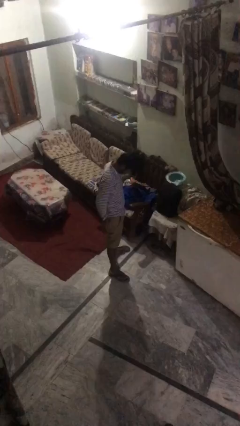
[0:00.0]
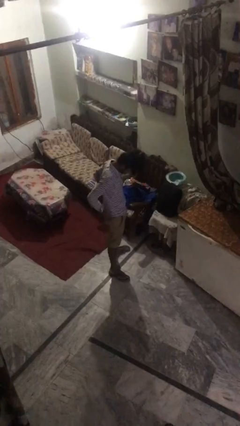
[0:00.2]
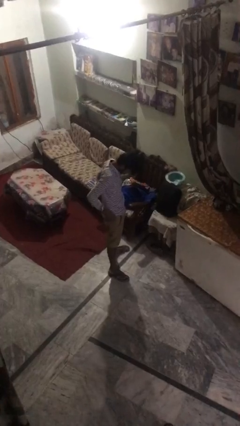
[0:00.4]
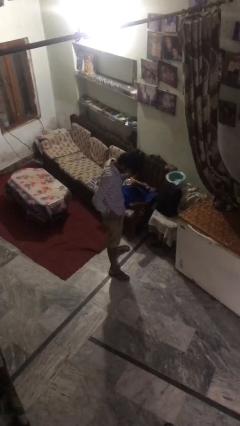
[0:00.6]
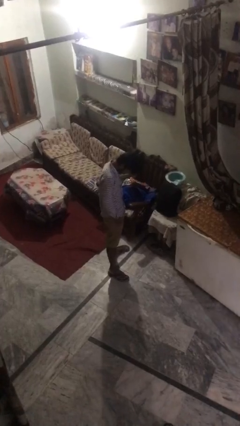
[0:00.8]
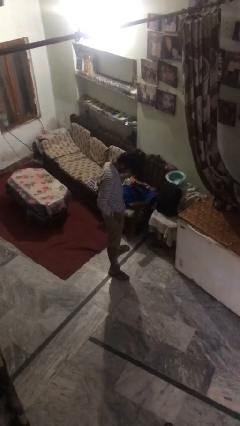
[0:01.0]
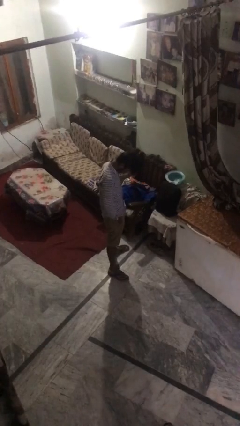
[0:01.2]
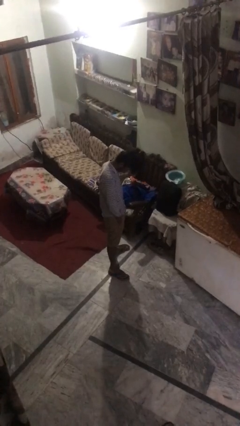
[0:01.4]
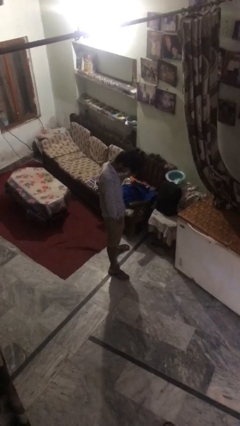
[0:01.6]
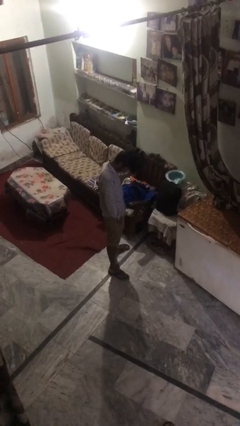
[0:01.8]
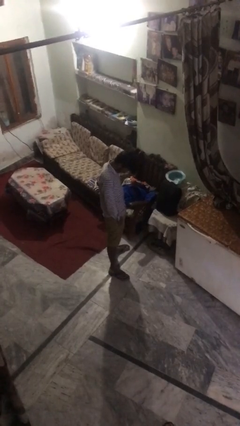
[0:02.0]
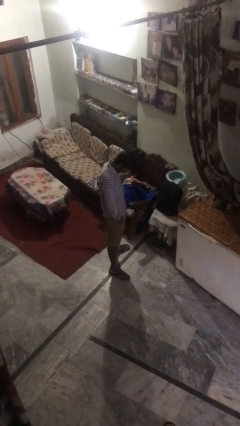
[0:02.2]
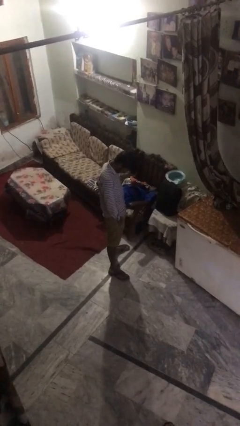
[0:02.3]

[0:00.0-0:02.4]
person puts hands in back pockets

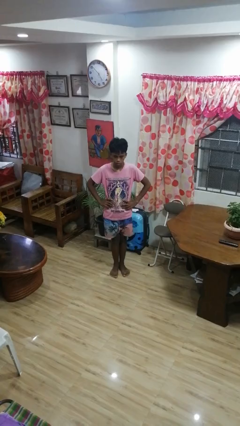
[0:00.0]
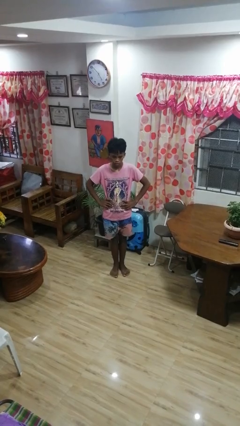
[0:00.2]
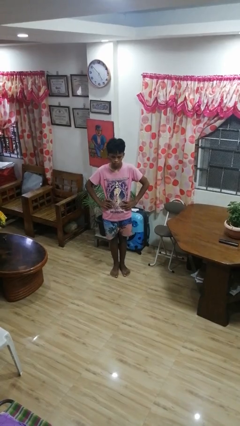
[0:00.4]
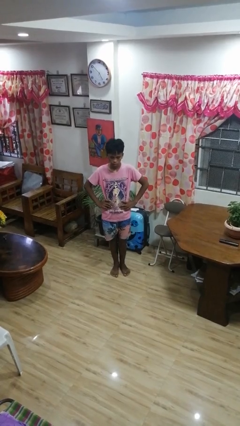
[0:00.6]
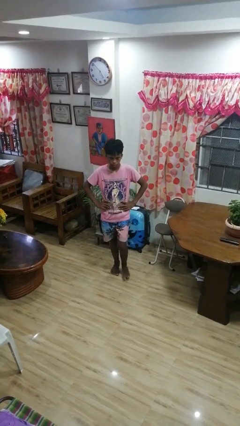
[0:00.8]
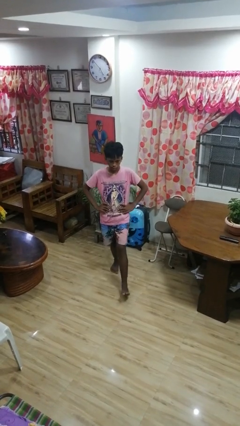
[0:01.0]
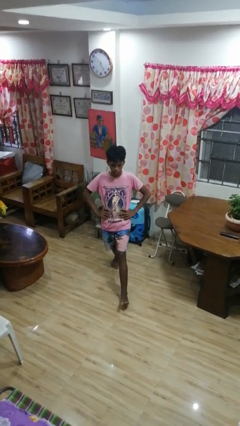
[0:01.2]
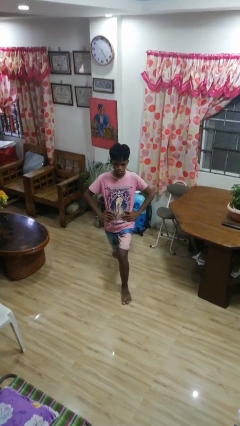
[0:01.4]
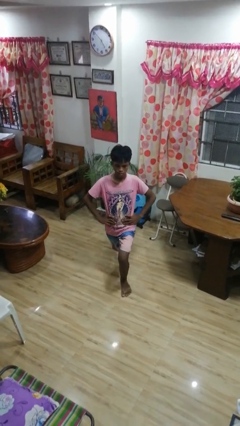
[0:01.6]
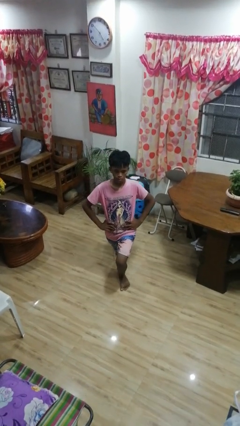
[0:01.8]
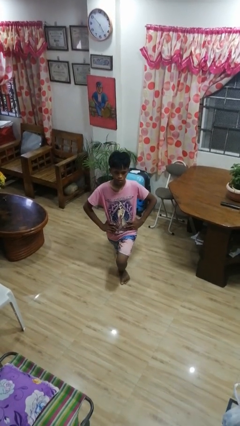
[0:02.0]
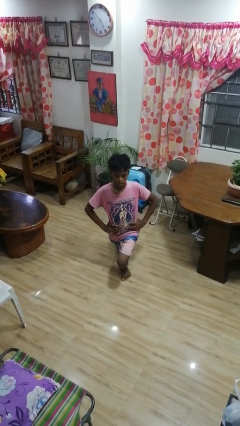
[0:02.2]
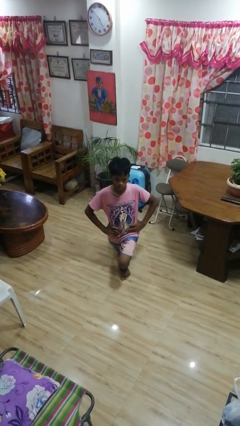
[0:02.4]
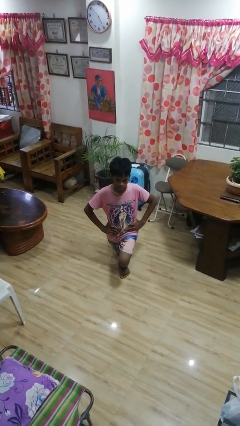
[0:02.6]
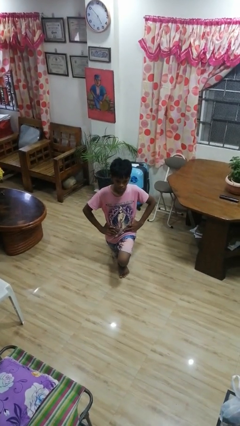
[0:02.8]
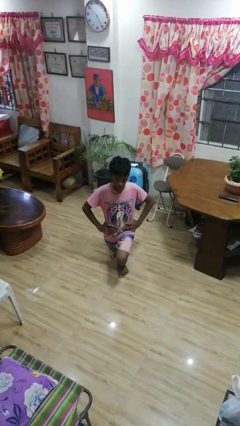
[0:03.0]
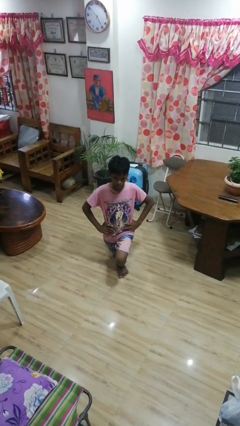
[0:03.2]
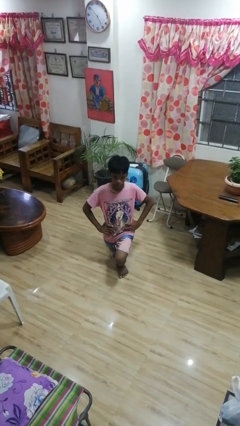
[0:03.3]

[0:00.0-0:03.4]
person exercises with lunges

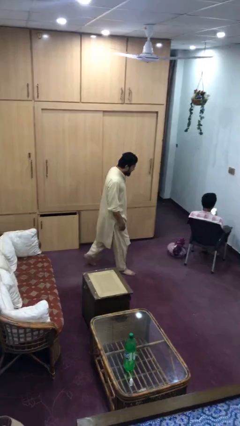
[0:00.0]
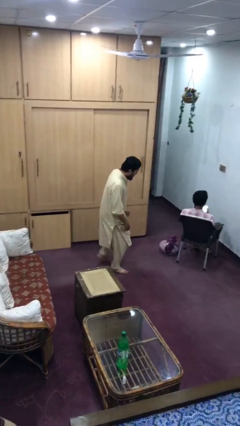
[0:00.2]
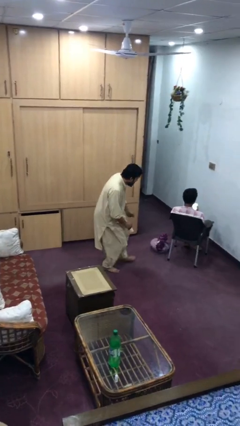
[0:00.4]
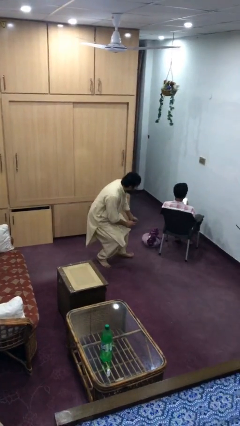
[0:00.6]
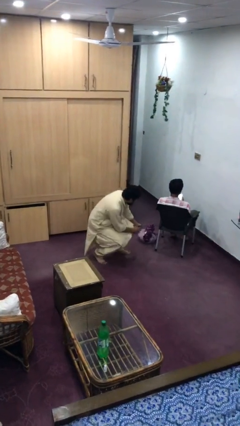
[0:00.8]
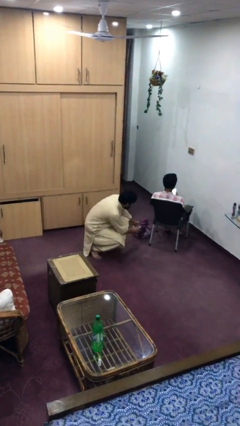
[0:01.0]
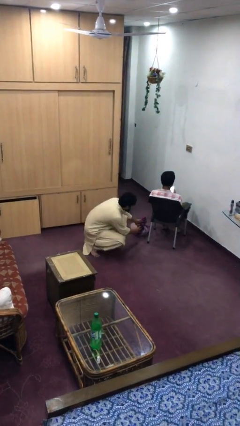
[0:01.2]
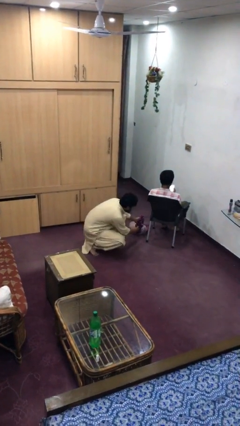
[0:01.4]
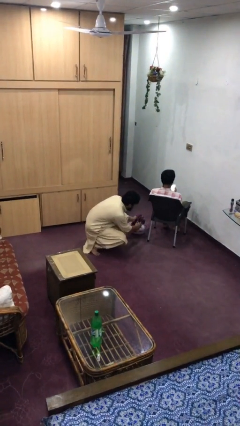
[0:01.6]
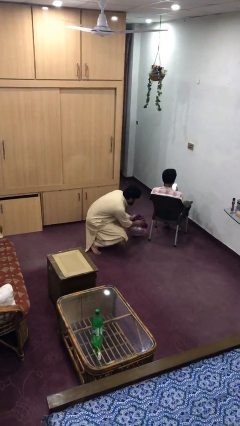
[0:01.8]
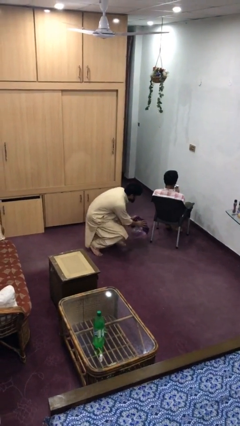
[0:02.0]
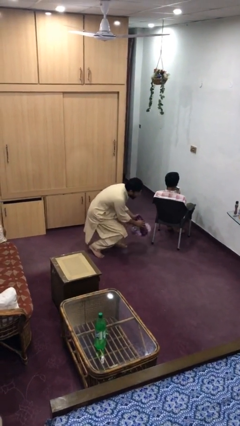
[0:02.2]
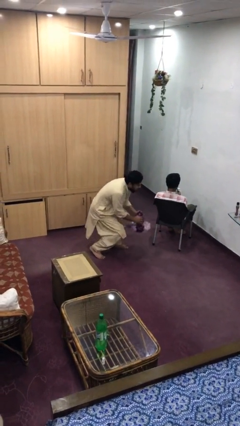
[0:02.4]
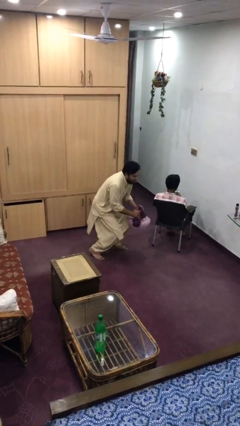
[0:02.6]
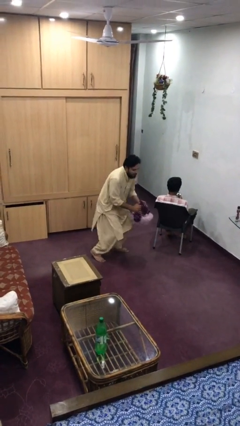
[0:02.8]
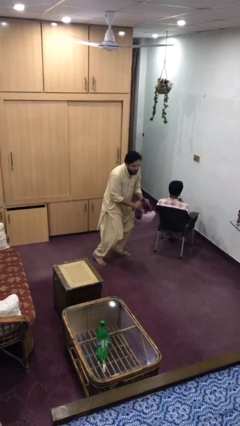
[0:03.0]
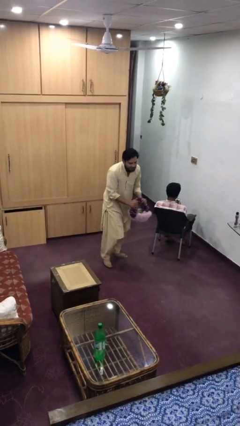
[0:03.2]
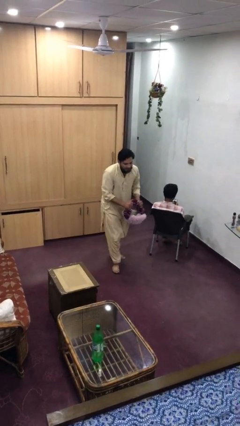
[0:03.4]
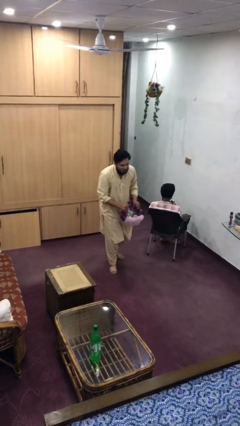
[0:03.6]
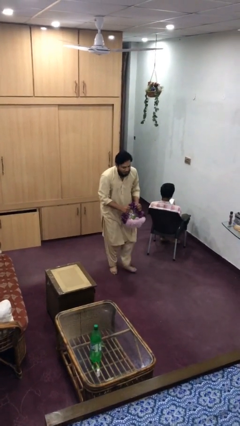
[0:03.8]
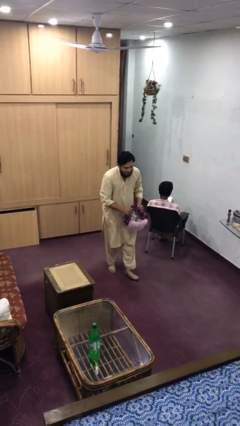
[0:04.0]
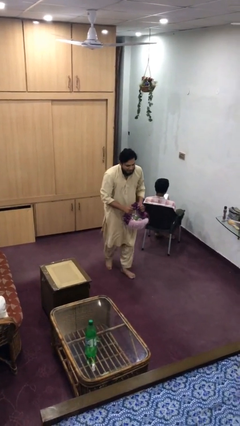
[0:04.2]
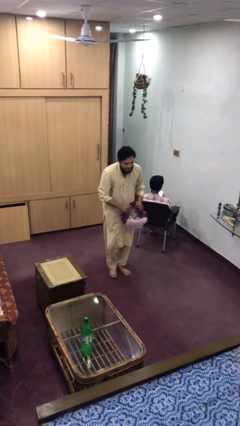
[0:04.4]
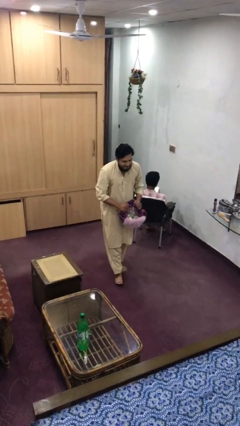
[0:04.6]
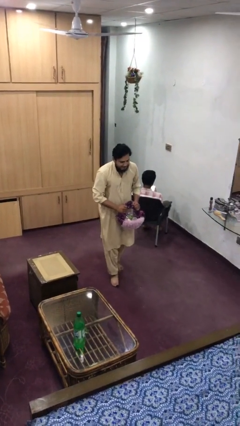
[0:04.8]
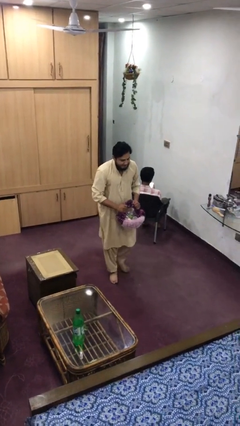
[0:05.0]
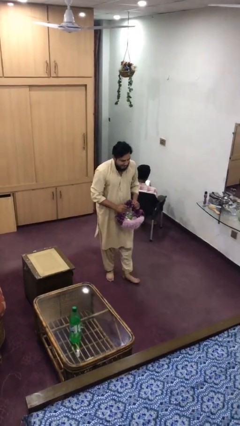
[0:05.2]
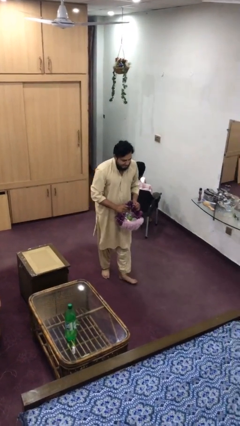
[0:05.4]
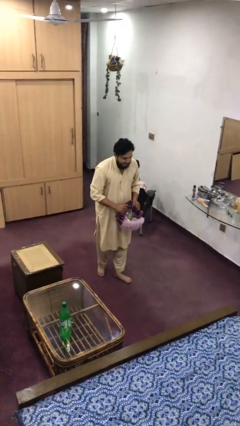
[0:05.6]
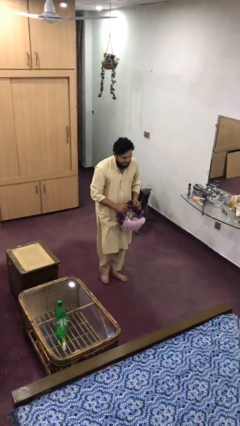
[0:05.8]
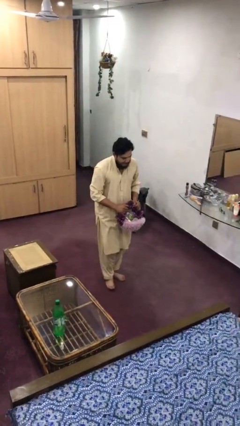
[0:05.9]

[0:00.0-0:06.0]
person steals object from person

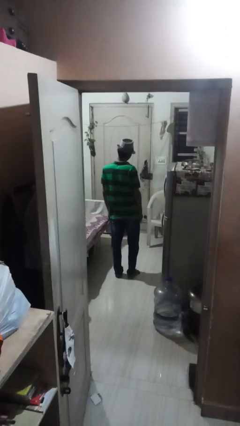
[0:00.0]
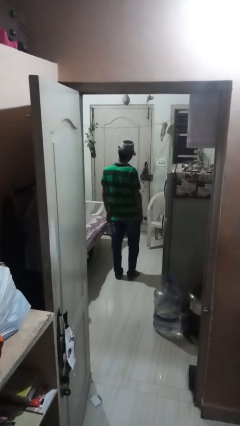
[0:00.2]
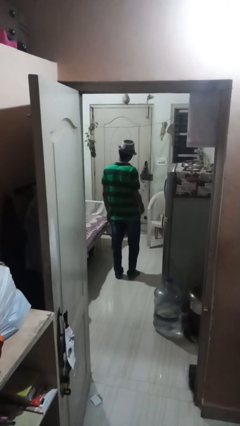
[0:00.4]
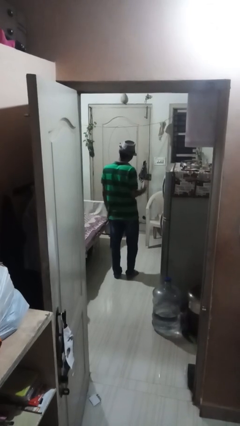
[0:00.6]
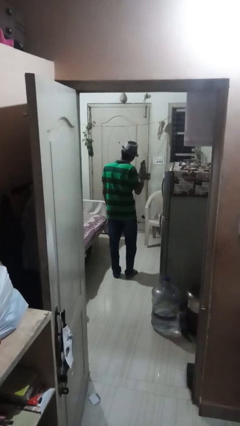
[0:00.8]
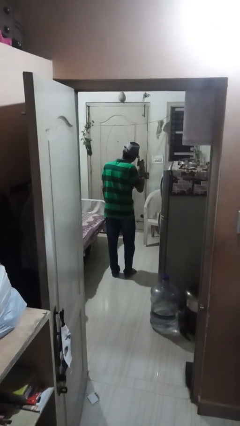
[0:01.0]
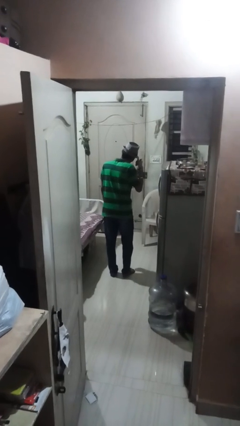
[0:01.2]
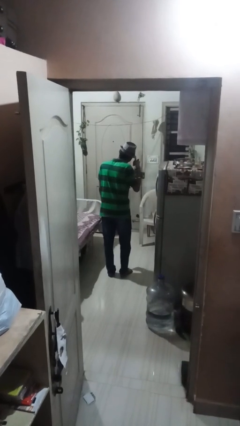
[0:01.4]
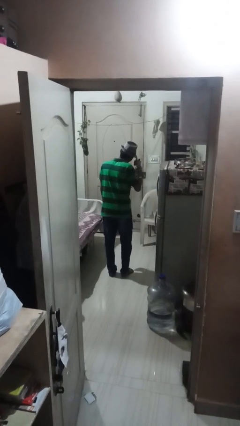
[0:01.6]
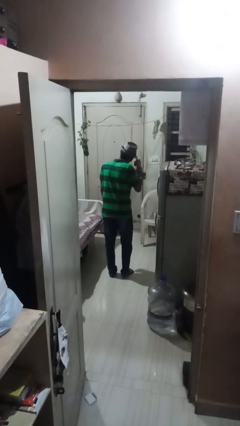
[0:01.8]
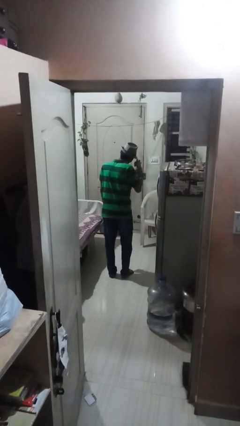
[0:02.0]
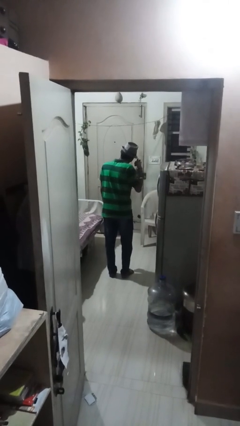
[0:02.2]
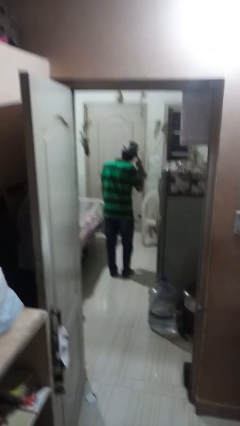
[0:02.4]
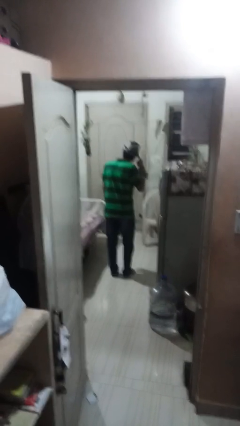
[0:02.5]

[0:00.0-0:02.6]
person gestures call me

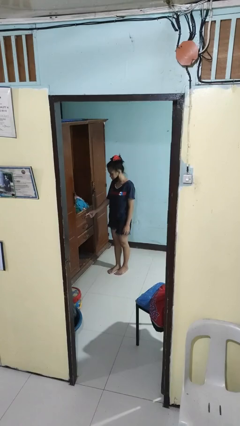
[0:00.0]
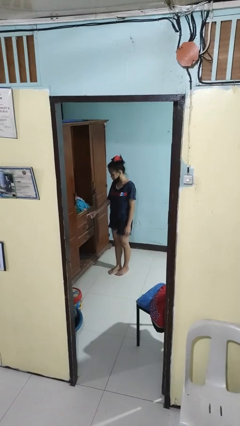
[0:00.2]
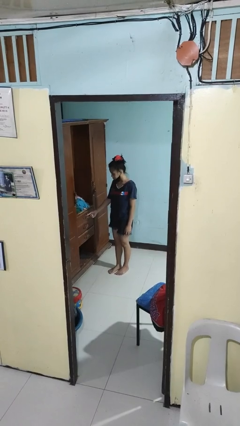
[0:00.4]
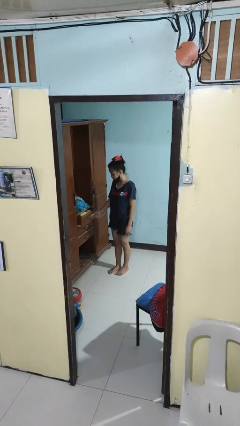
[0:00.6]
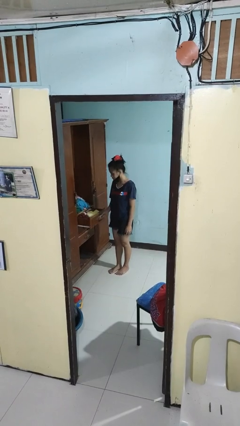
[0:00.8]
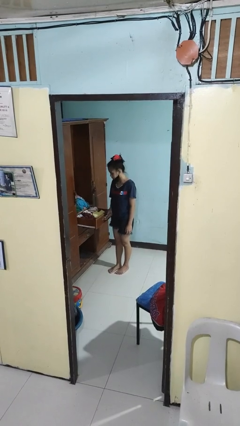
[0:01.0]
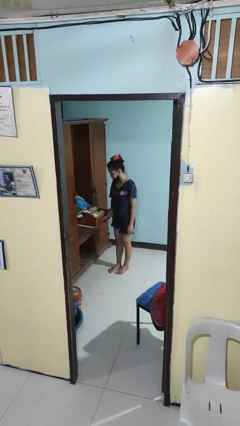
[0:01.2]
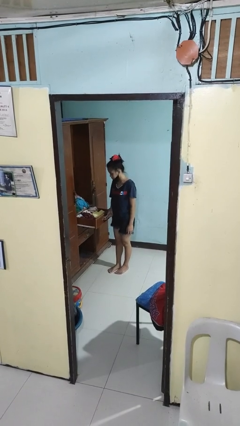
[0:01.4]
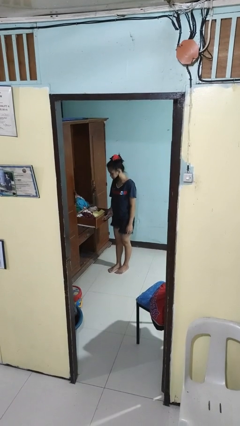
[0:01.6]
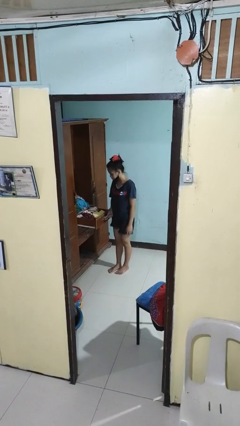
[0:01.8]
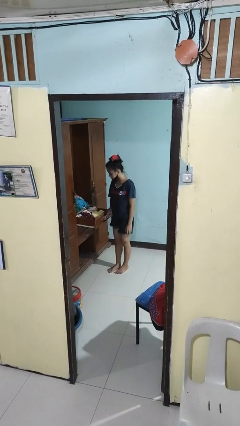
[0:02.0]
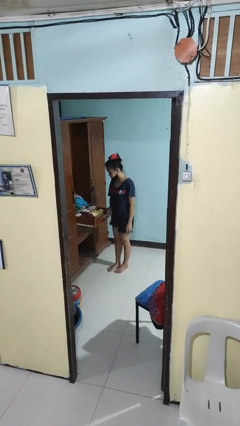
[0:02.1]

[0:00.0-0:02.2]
person opens dresser drawer

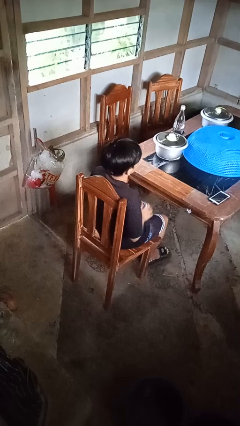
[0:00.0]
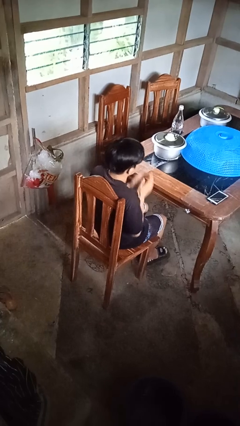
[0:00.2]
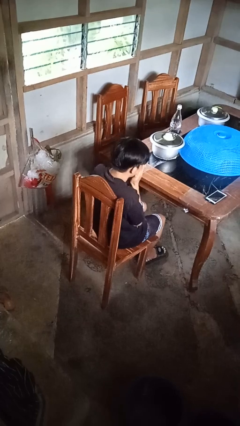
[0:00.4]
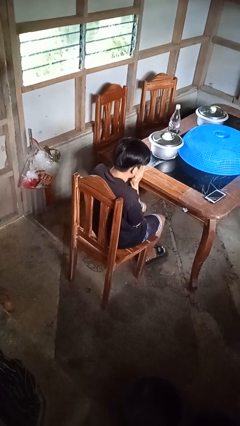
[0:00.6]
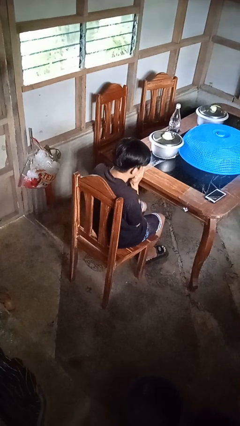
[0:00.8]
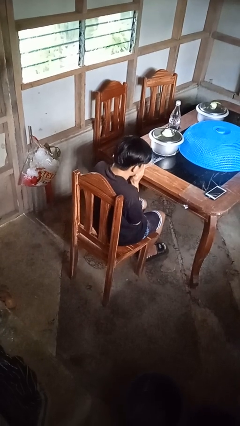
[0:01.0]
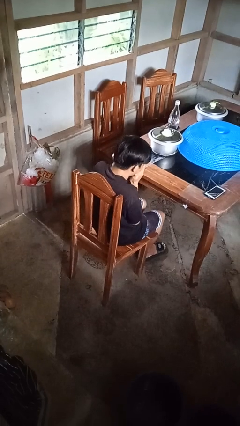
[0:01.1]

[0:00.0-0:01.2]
person sneezes into hand
